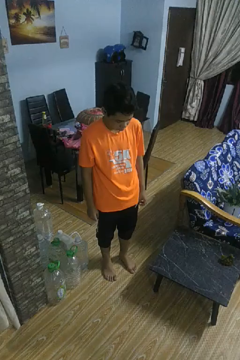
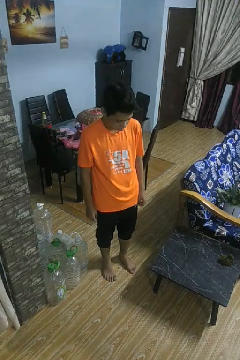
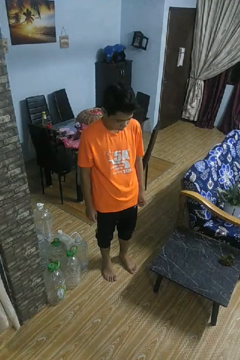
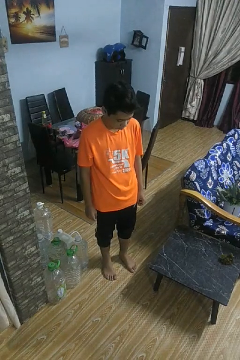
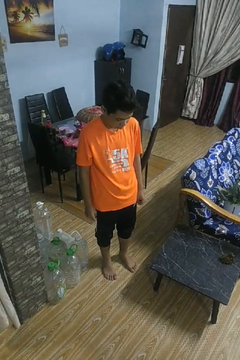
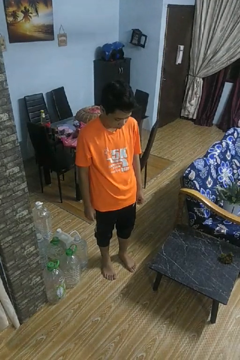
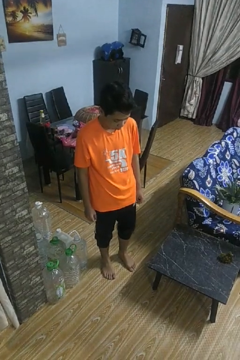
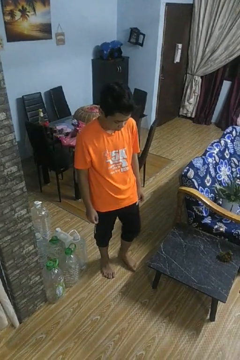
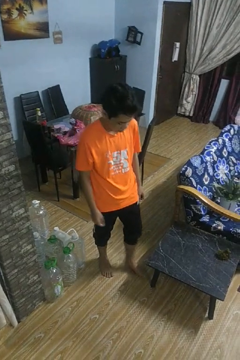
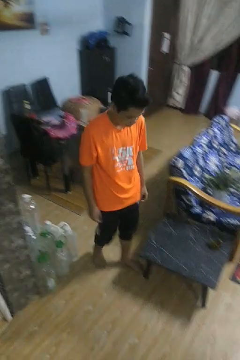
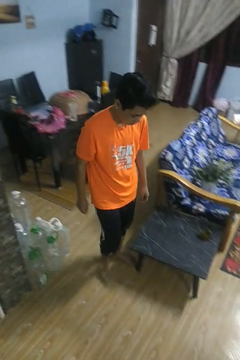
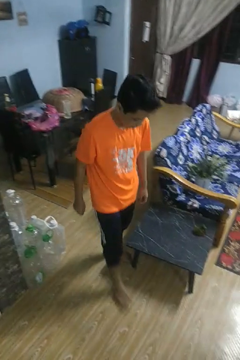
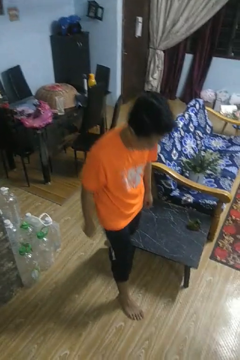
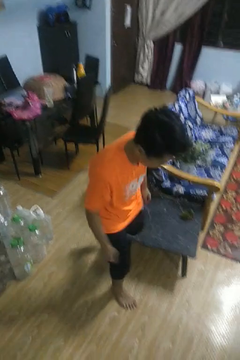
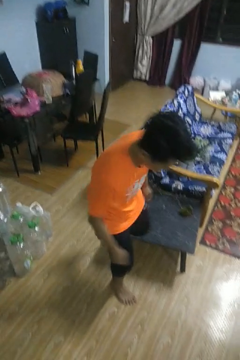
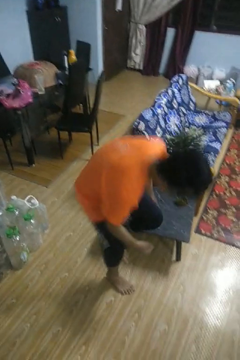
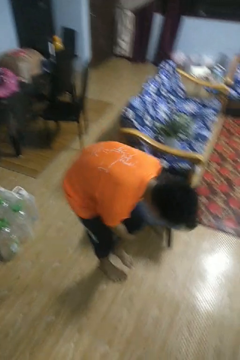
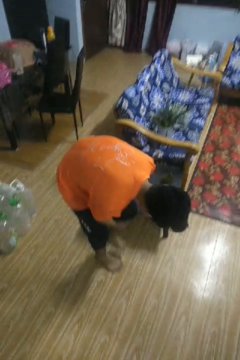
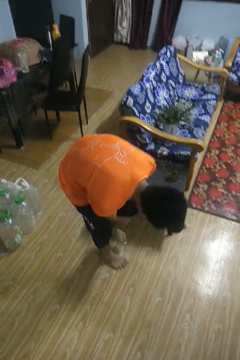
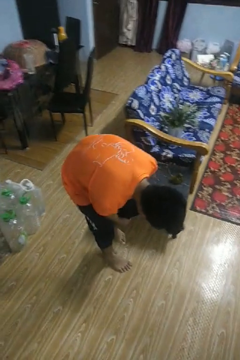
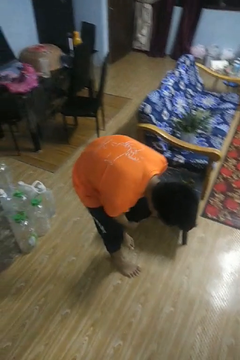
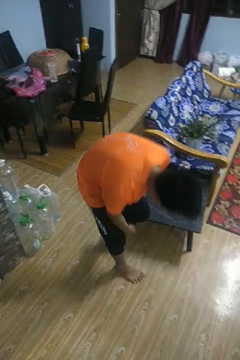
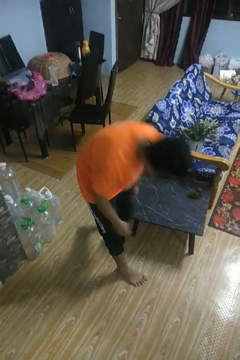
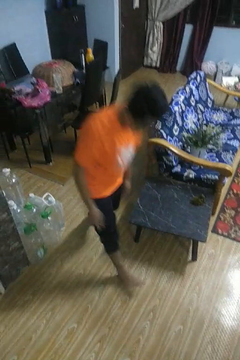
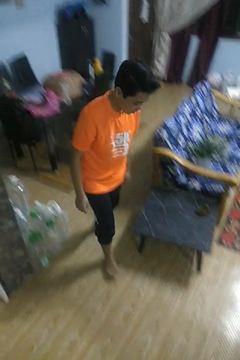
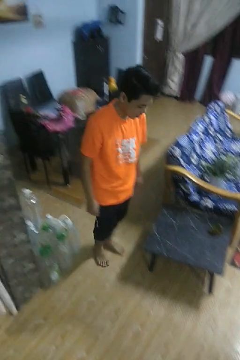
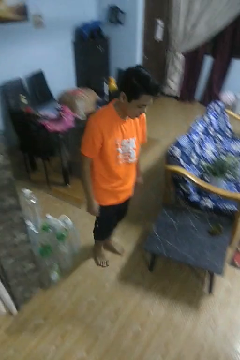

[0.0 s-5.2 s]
person bumps into table

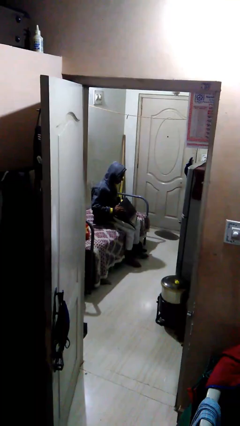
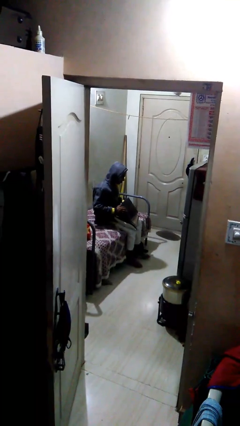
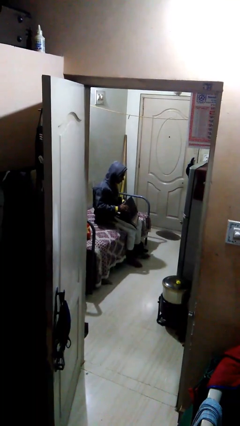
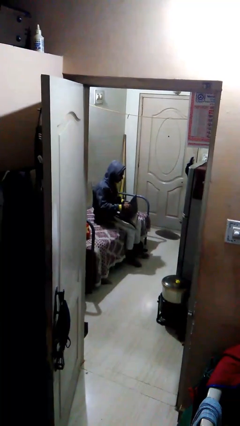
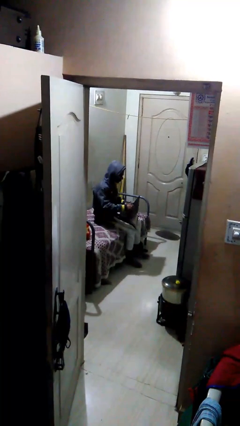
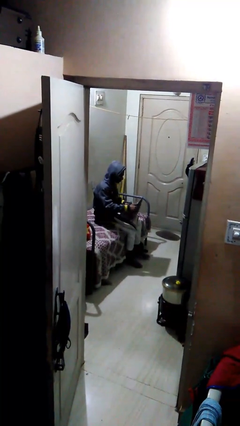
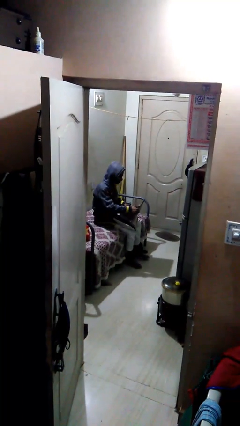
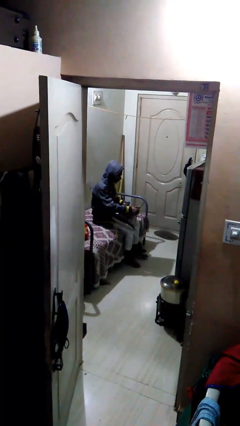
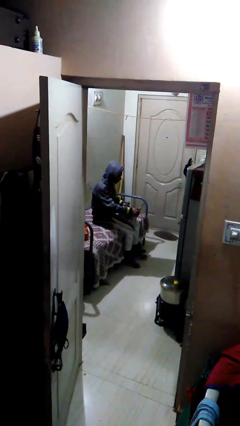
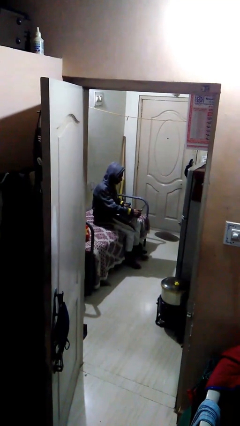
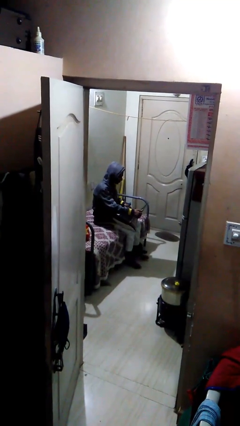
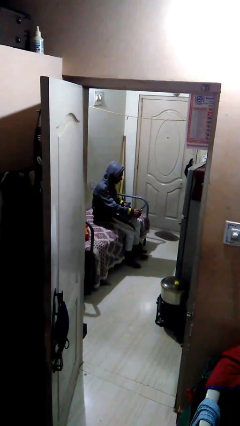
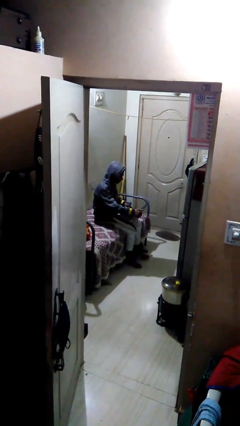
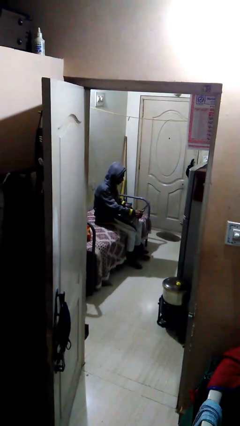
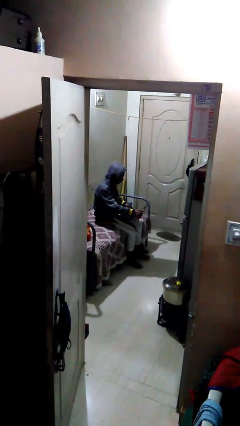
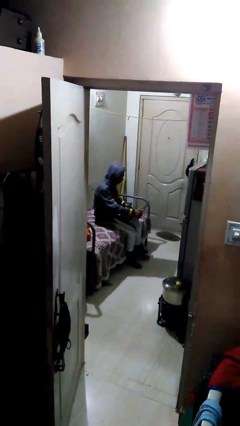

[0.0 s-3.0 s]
person interacts with laptop

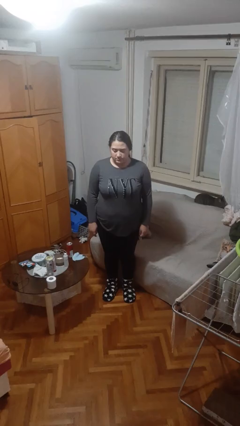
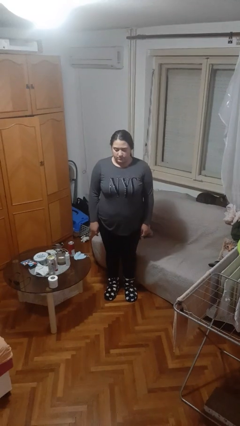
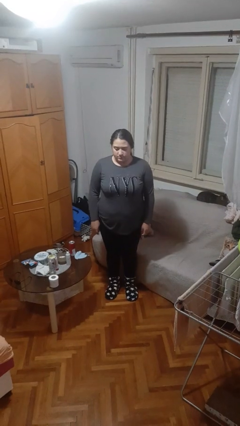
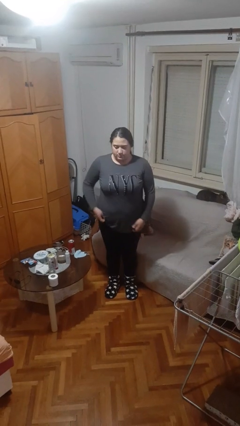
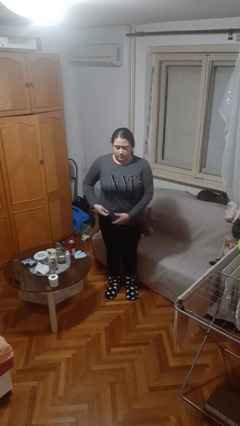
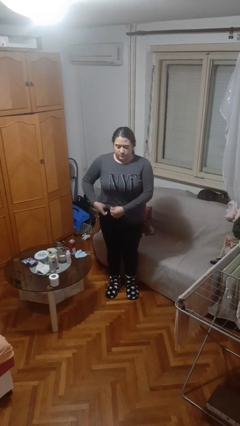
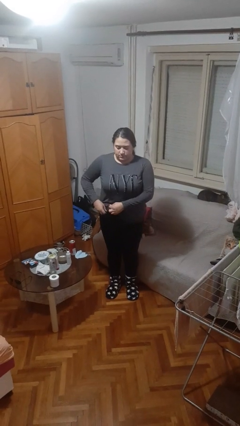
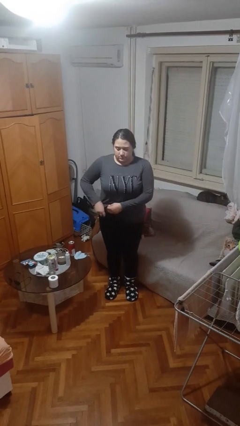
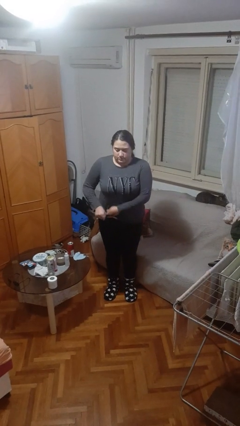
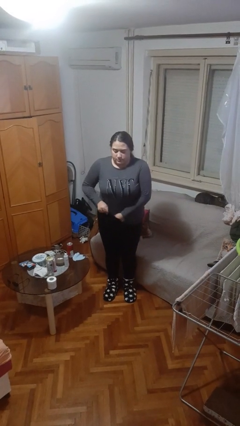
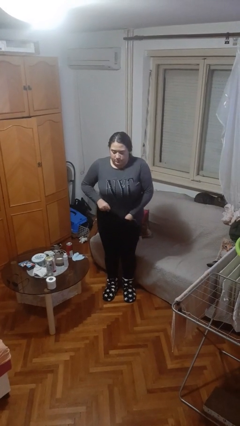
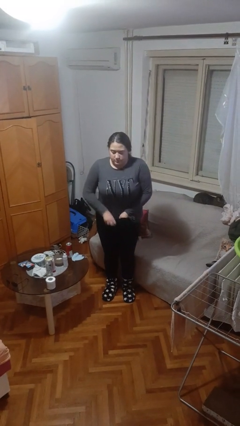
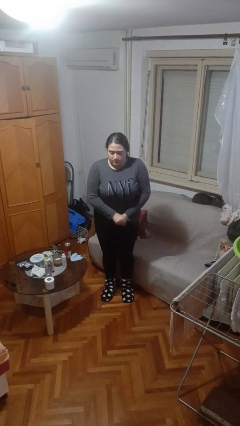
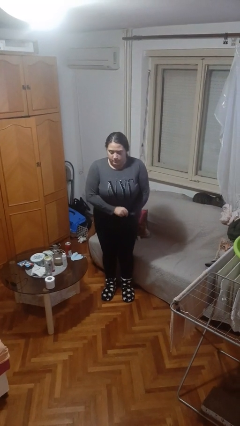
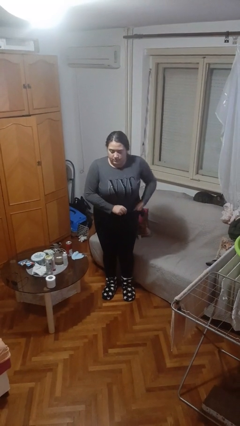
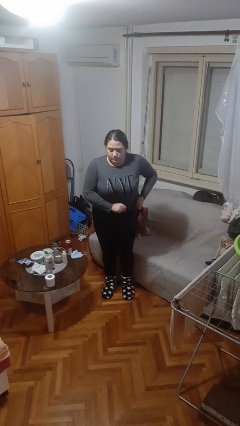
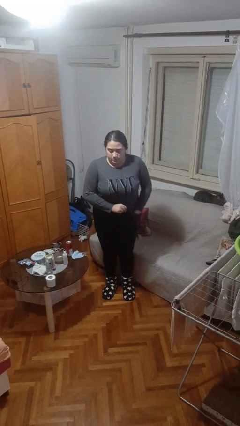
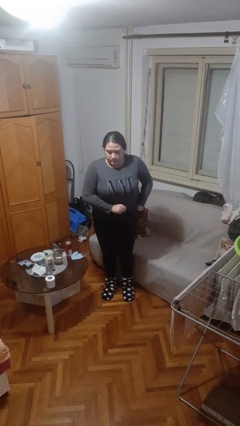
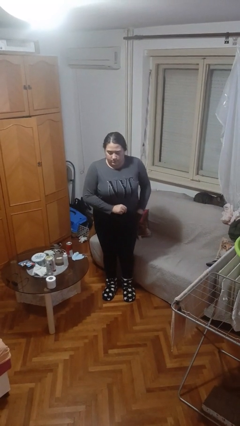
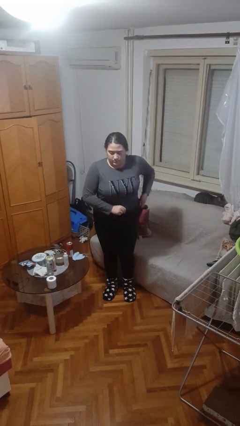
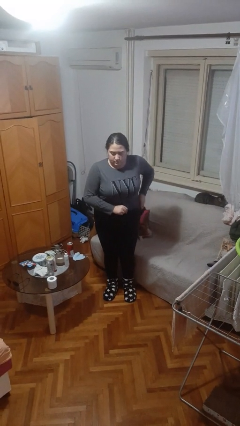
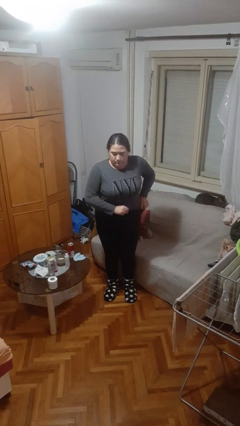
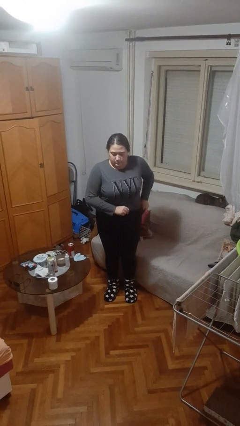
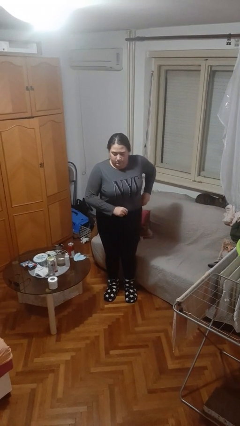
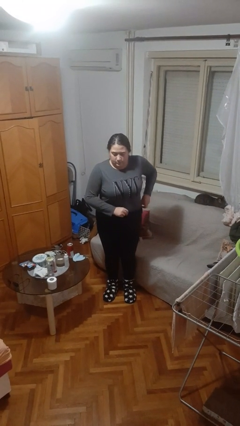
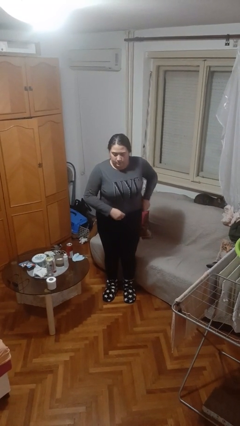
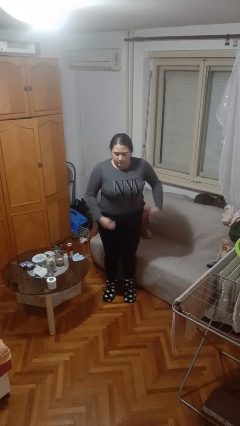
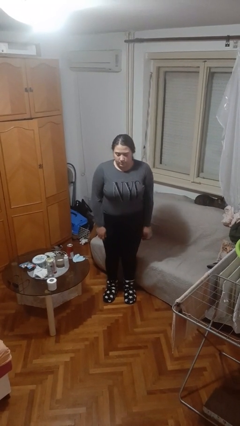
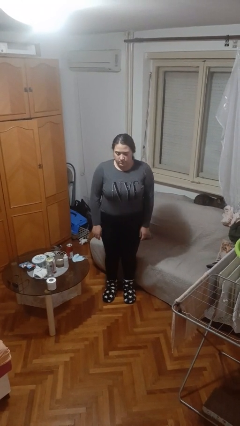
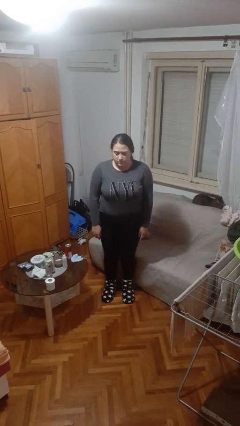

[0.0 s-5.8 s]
person tucks in shirt

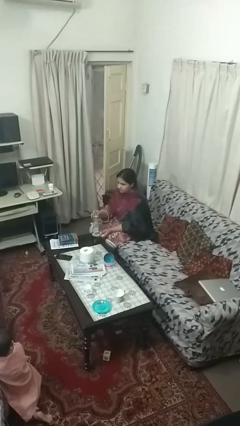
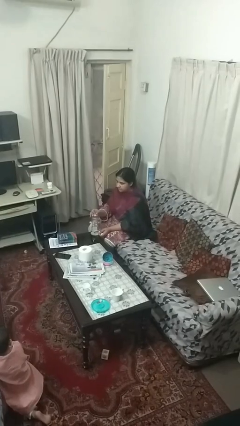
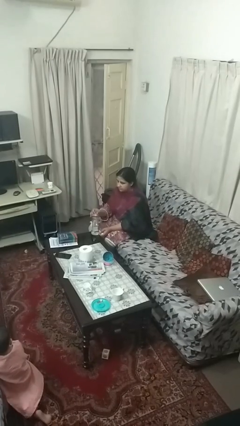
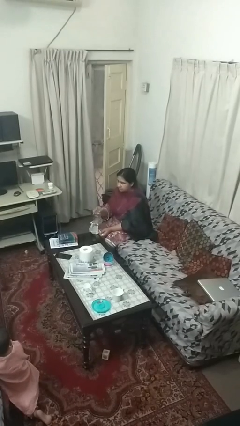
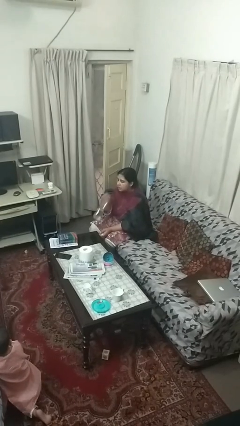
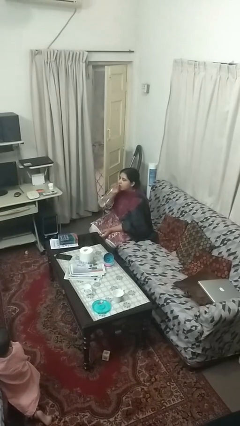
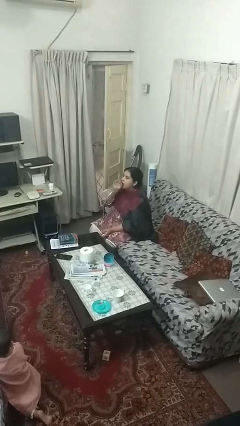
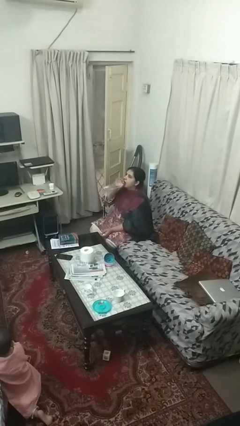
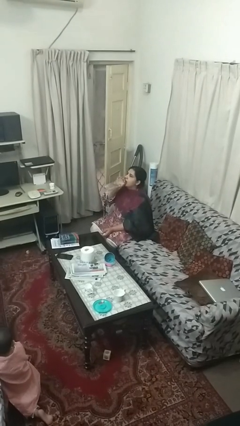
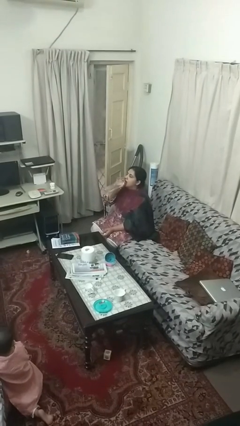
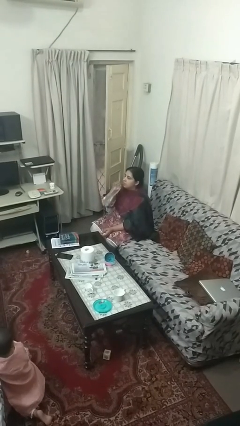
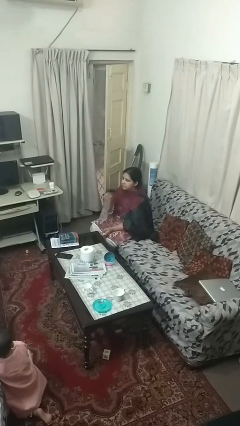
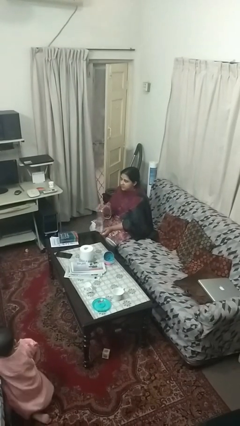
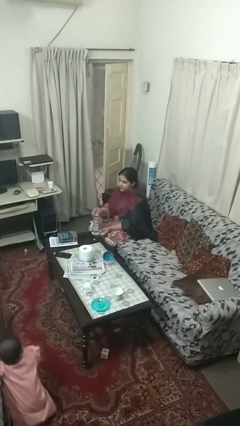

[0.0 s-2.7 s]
person drinks from bottle

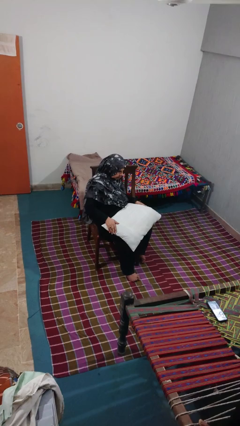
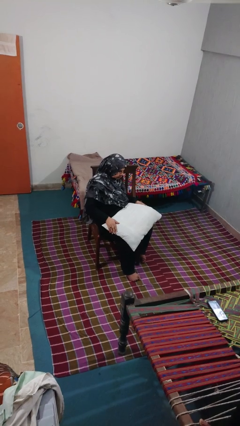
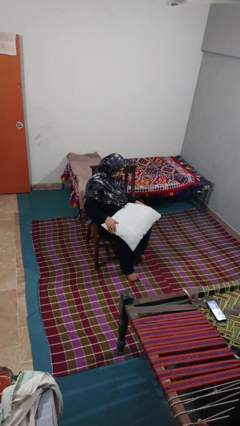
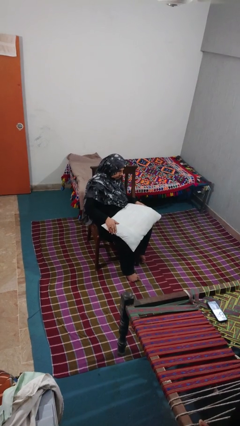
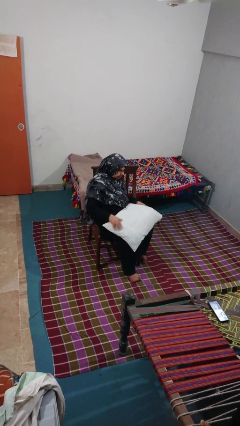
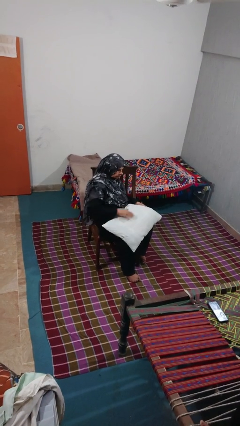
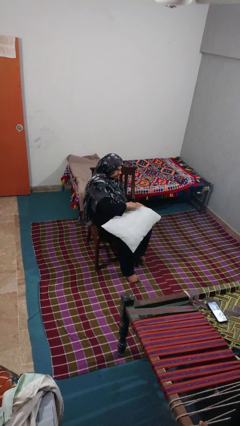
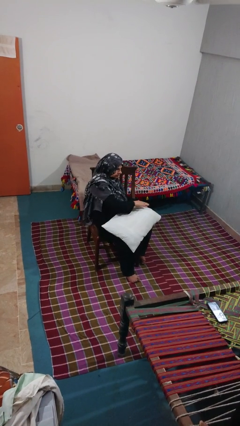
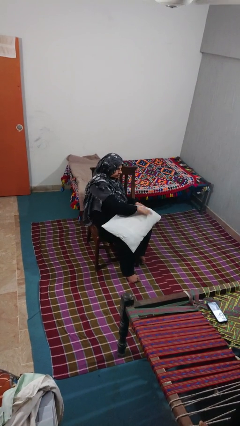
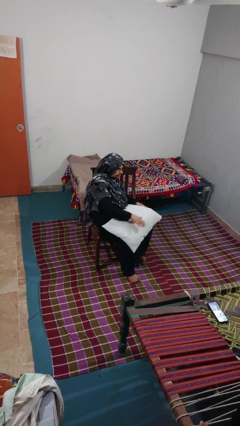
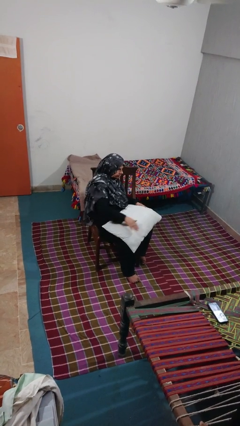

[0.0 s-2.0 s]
person waves hand over object

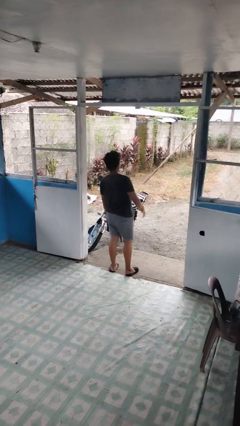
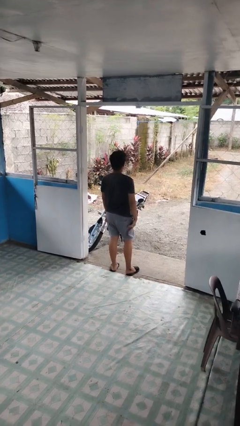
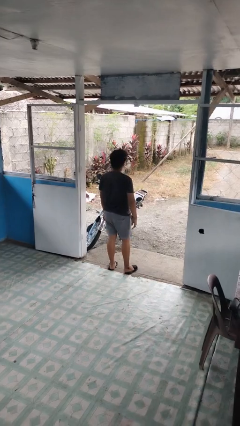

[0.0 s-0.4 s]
person gestures lower hand
